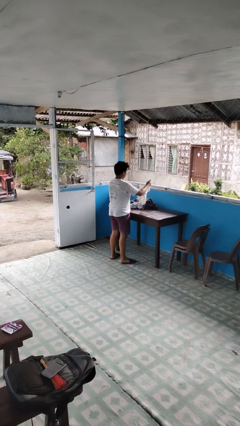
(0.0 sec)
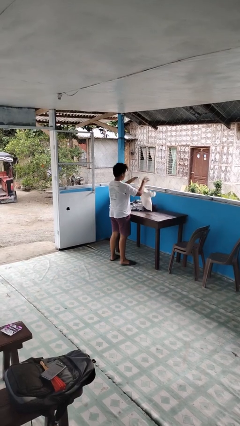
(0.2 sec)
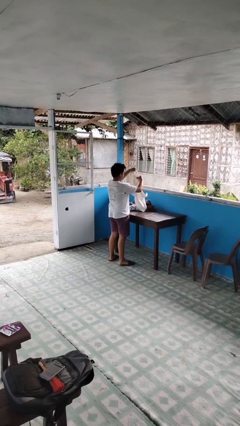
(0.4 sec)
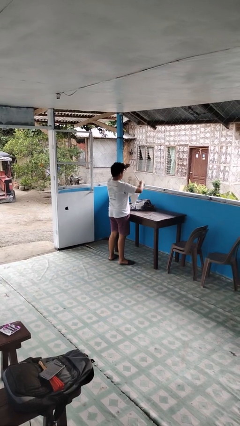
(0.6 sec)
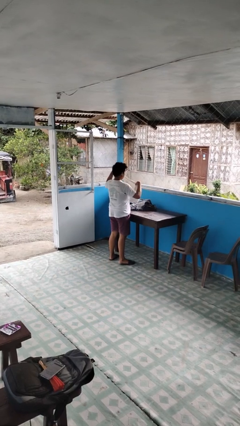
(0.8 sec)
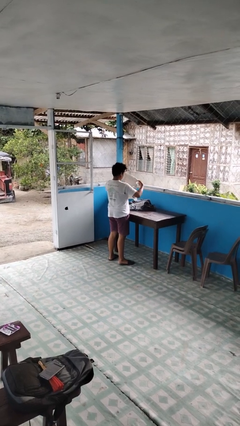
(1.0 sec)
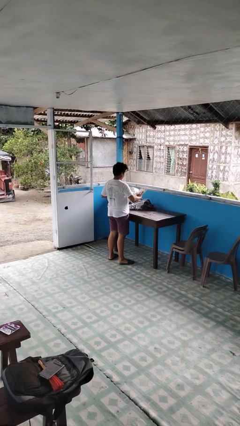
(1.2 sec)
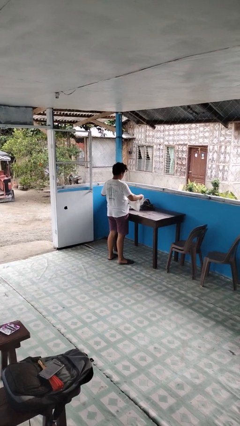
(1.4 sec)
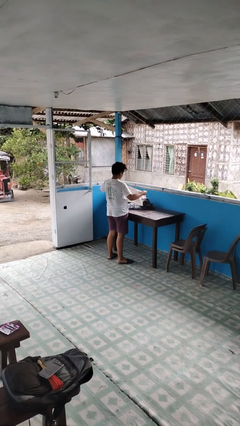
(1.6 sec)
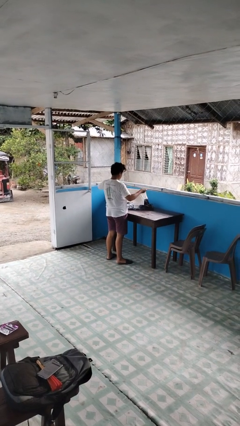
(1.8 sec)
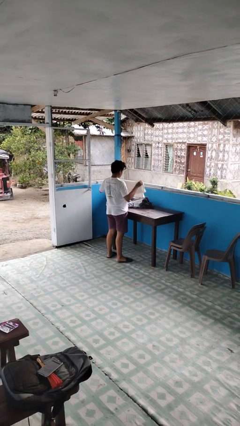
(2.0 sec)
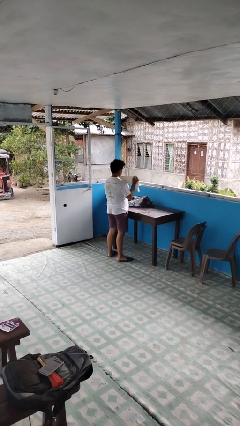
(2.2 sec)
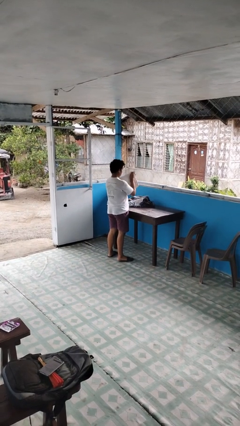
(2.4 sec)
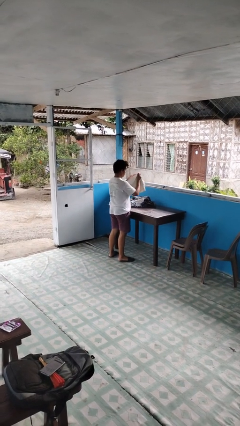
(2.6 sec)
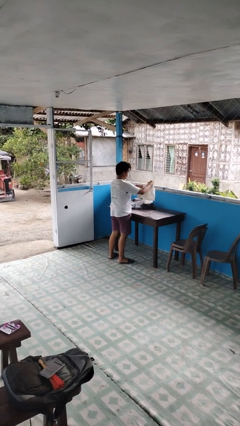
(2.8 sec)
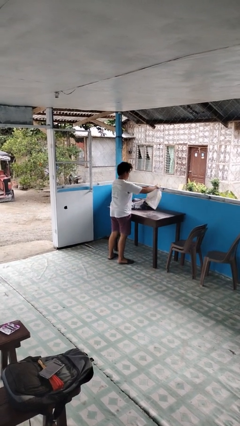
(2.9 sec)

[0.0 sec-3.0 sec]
person folds shirt

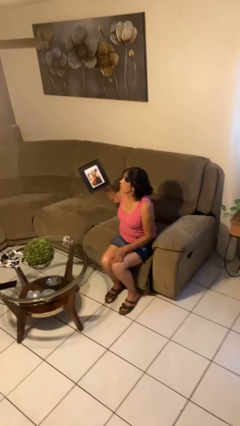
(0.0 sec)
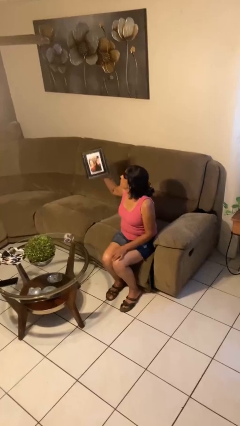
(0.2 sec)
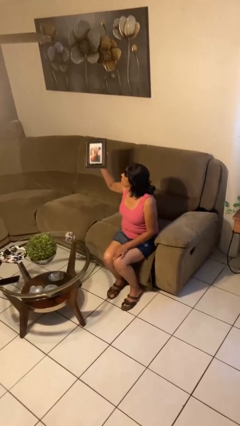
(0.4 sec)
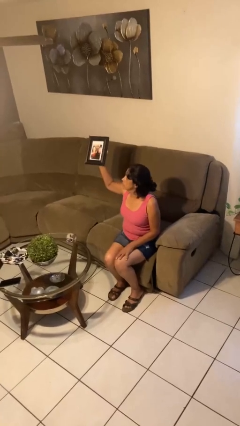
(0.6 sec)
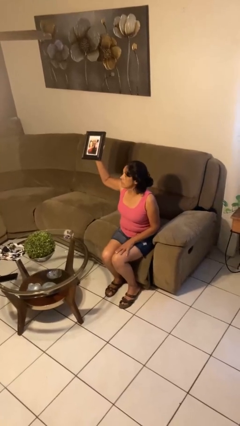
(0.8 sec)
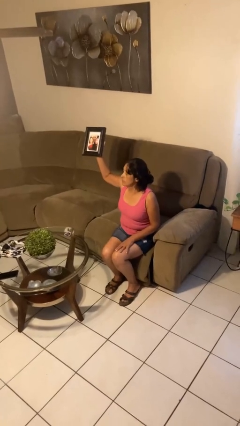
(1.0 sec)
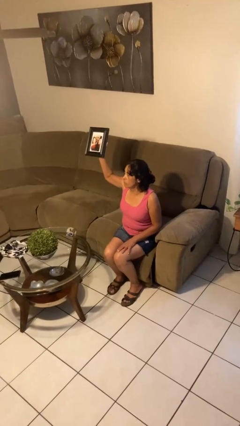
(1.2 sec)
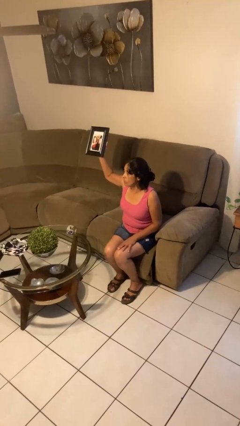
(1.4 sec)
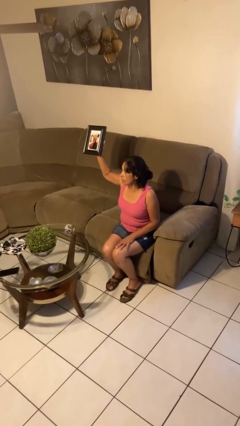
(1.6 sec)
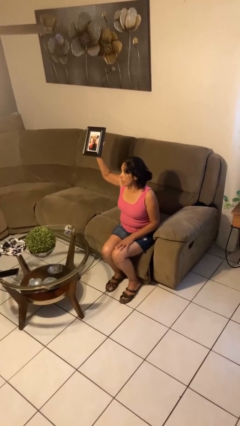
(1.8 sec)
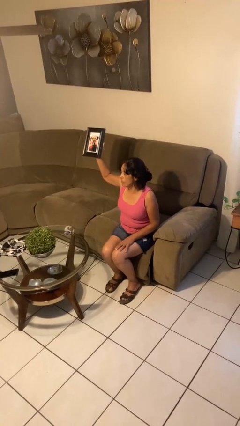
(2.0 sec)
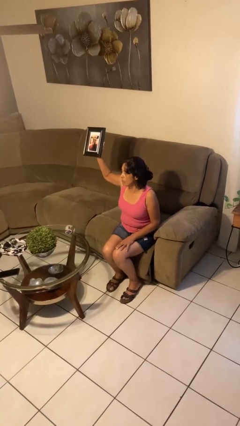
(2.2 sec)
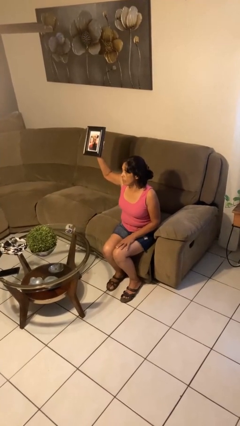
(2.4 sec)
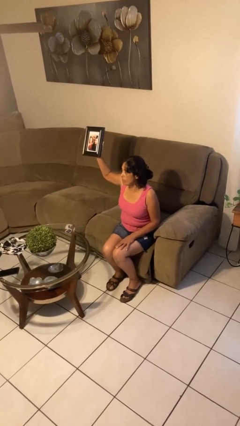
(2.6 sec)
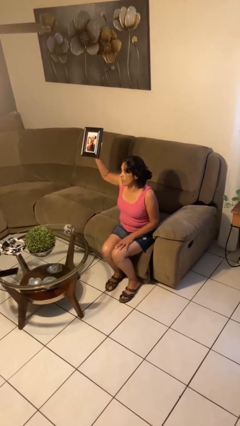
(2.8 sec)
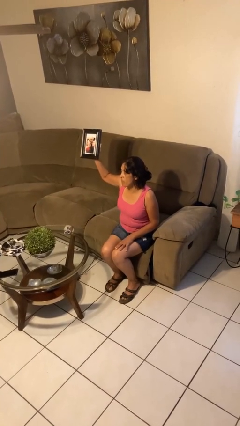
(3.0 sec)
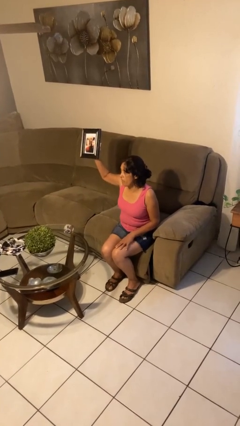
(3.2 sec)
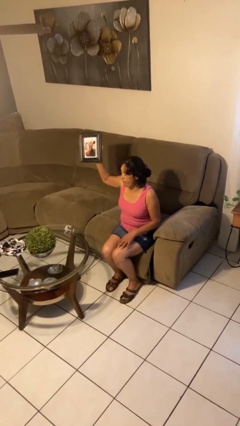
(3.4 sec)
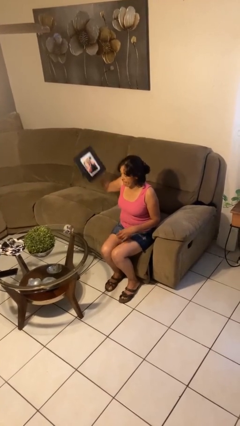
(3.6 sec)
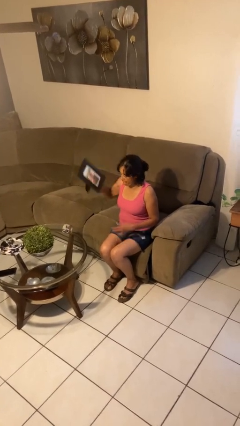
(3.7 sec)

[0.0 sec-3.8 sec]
person holds object above head

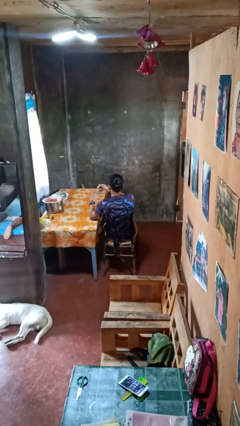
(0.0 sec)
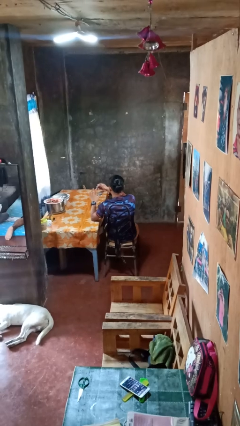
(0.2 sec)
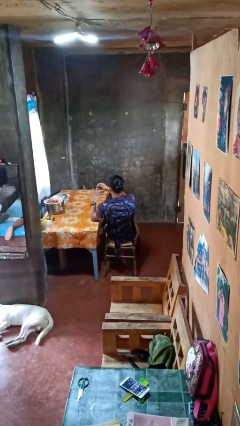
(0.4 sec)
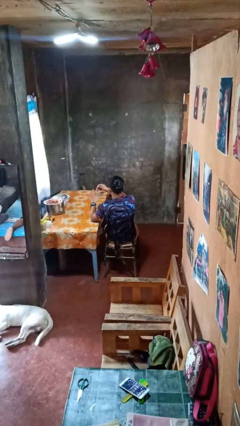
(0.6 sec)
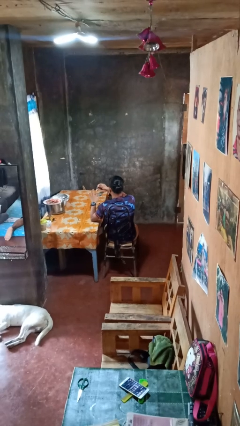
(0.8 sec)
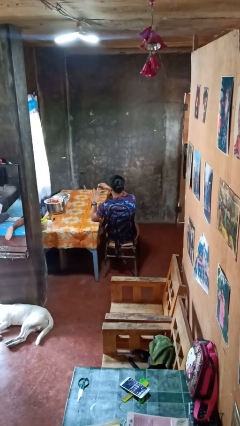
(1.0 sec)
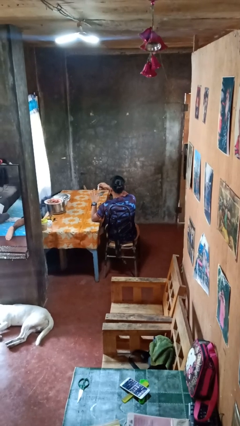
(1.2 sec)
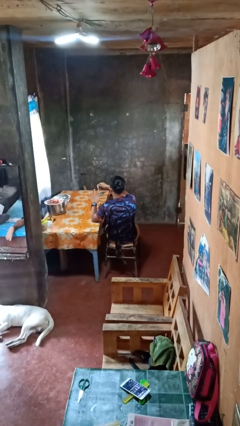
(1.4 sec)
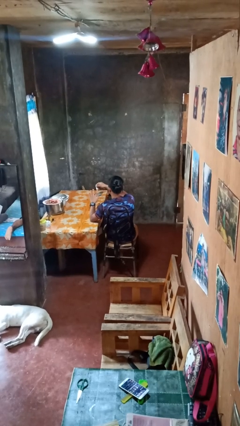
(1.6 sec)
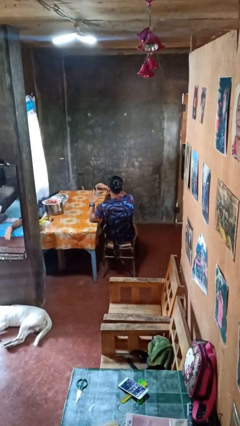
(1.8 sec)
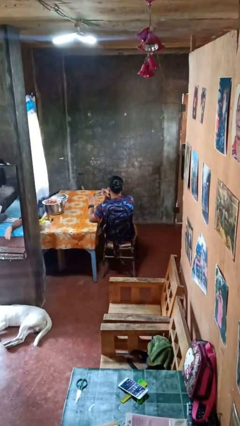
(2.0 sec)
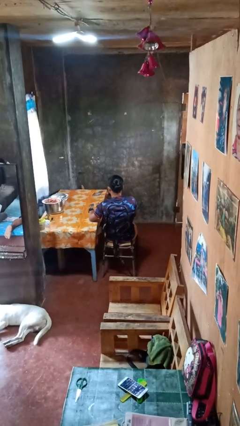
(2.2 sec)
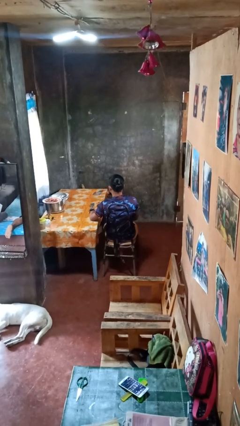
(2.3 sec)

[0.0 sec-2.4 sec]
person clips fingernails

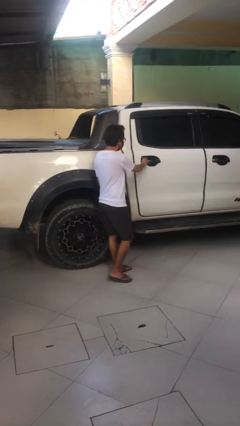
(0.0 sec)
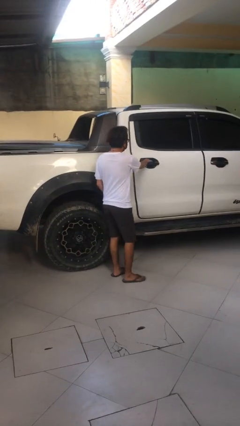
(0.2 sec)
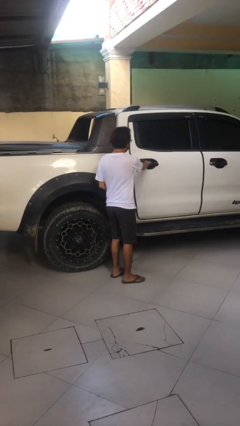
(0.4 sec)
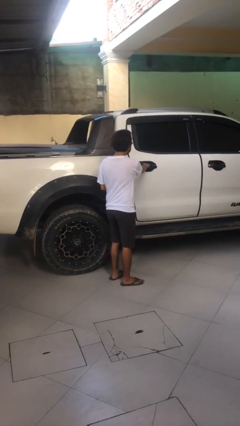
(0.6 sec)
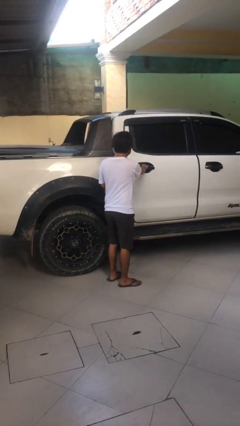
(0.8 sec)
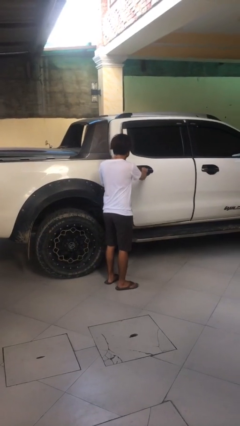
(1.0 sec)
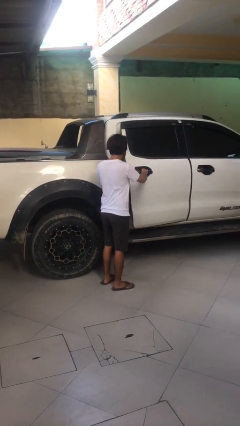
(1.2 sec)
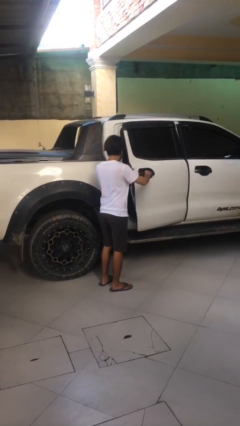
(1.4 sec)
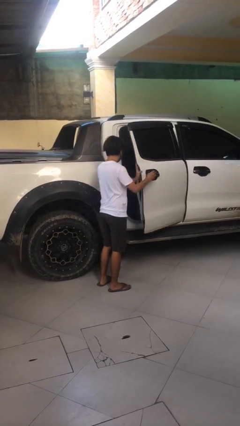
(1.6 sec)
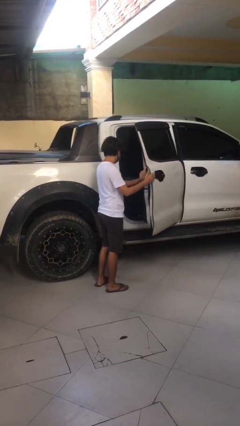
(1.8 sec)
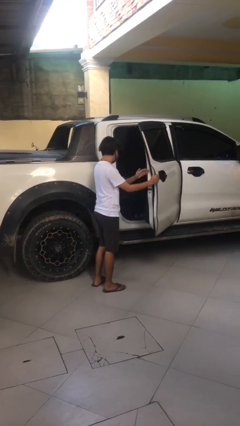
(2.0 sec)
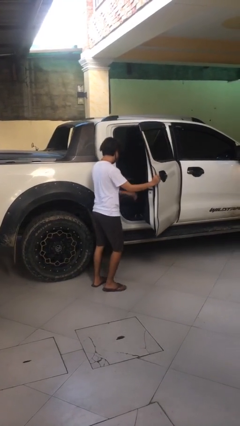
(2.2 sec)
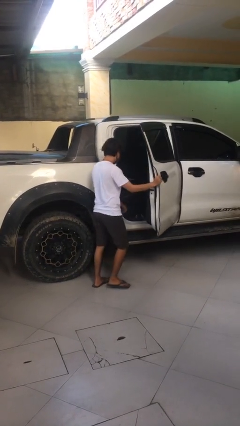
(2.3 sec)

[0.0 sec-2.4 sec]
person opens car door

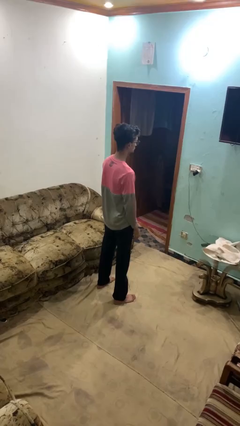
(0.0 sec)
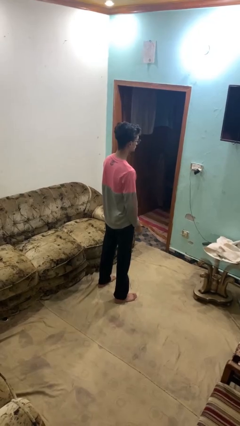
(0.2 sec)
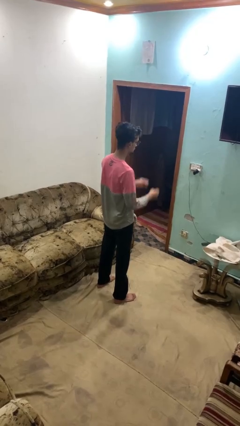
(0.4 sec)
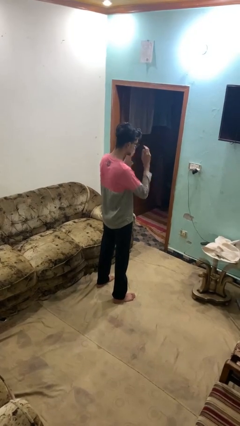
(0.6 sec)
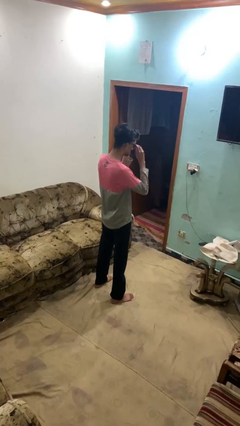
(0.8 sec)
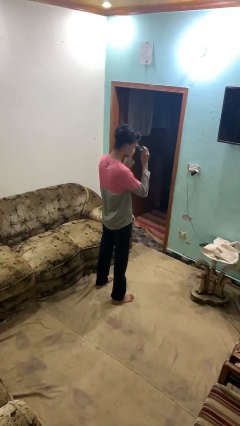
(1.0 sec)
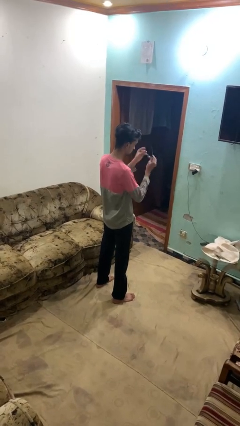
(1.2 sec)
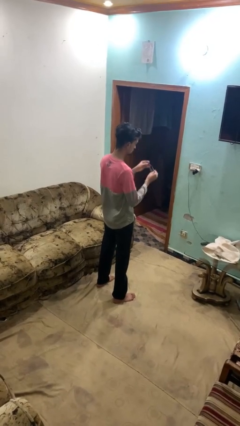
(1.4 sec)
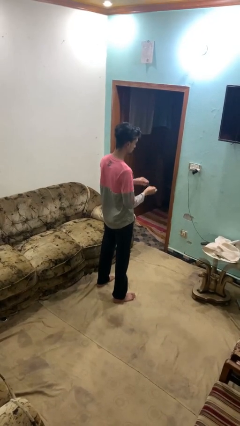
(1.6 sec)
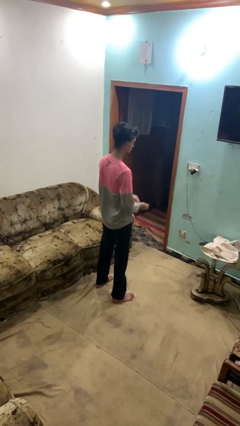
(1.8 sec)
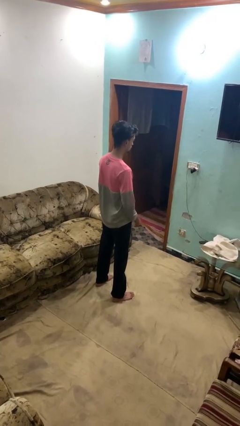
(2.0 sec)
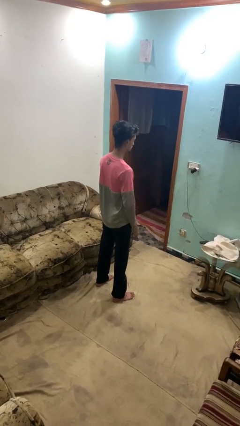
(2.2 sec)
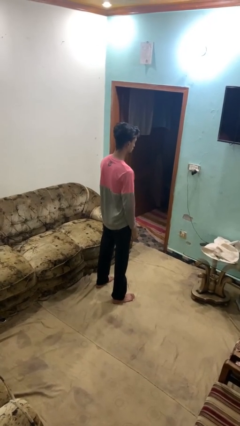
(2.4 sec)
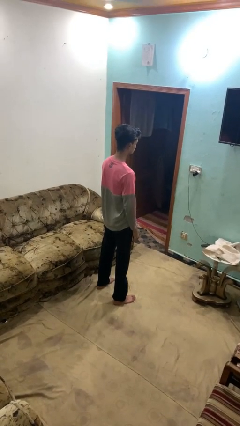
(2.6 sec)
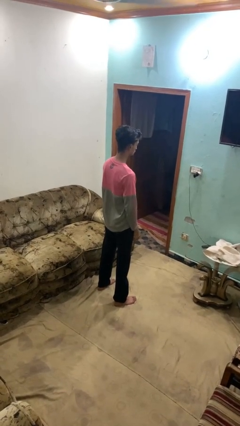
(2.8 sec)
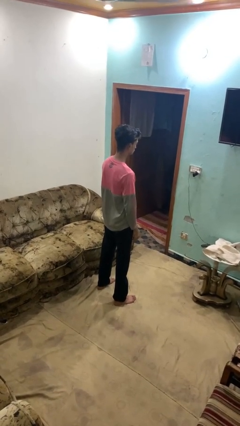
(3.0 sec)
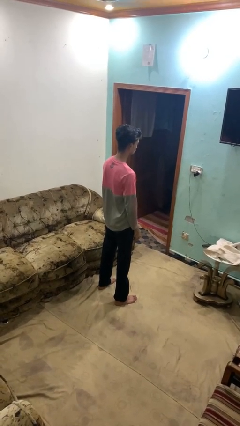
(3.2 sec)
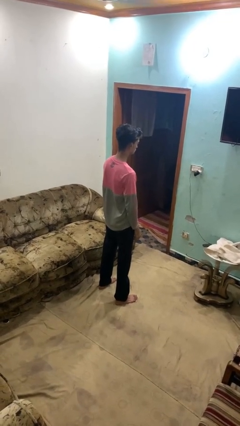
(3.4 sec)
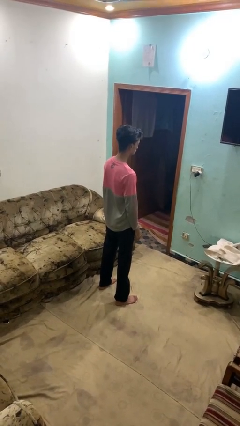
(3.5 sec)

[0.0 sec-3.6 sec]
person takes off glasses

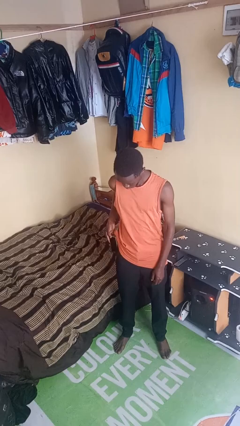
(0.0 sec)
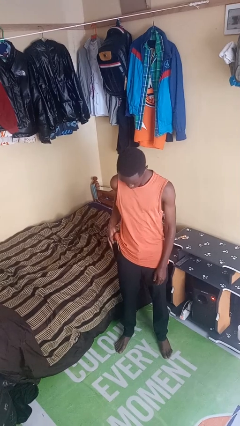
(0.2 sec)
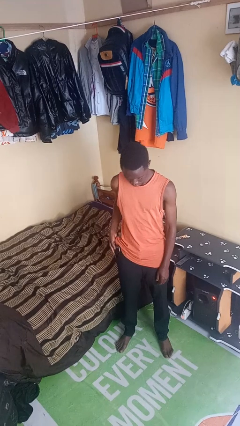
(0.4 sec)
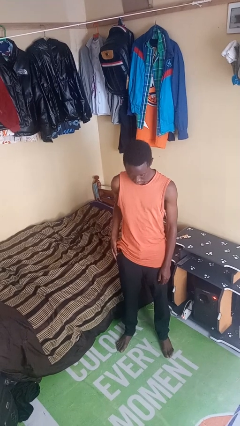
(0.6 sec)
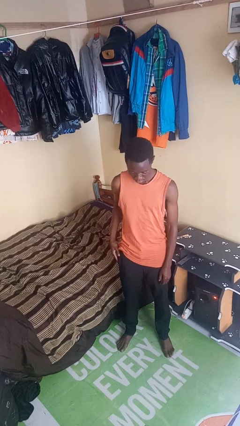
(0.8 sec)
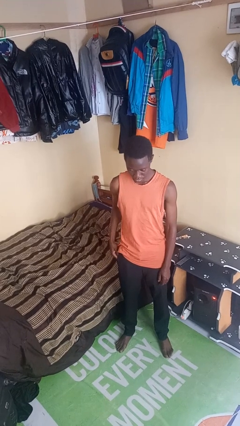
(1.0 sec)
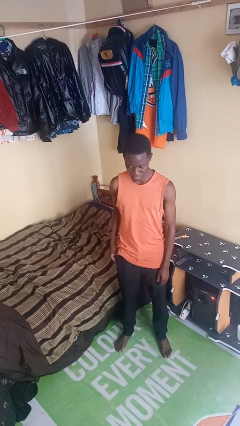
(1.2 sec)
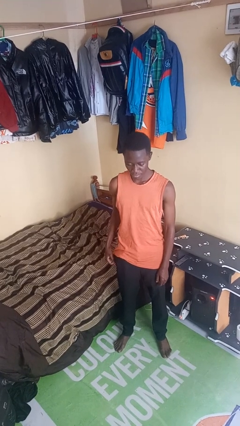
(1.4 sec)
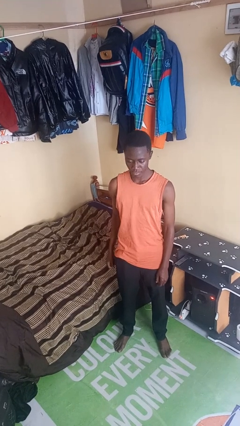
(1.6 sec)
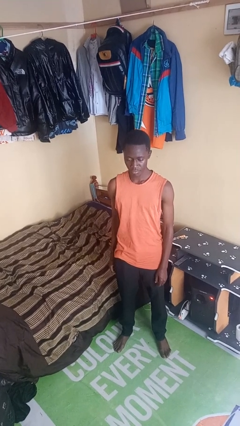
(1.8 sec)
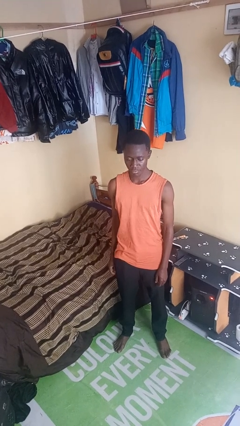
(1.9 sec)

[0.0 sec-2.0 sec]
person puts phone into pocket
